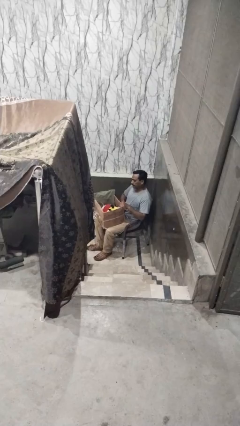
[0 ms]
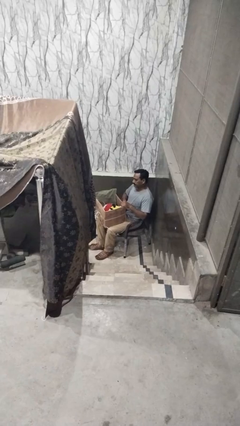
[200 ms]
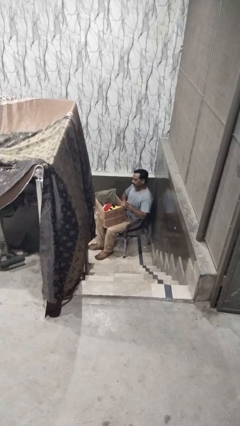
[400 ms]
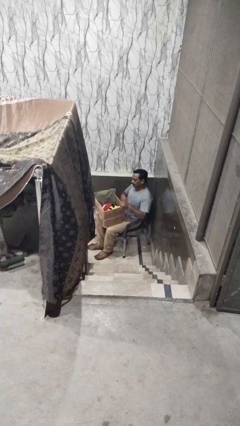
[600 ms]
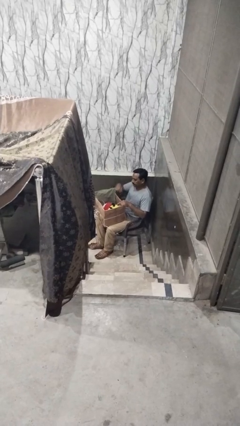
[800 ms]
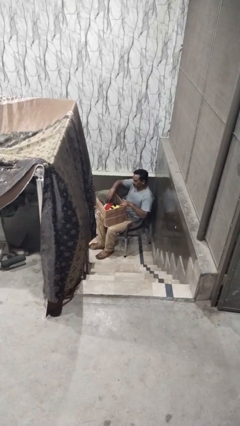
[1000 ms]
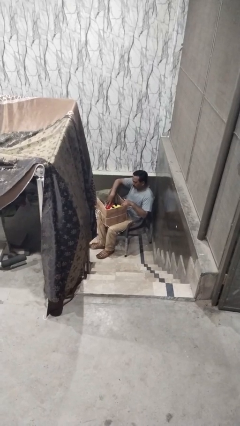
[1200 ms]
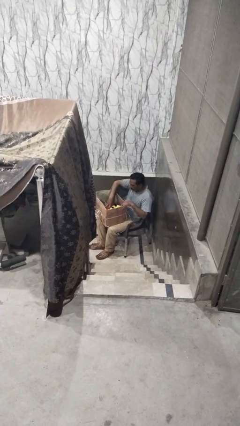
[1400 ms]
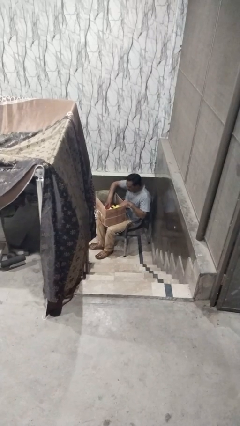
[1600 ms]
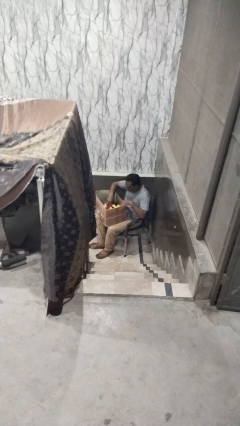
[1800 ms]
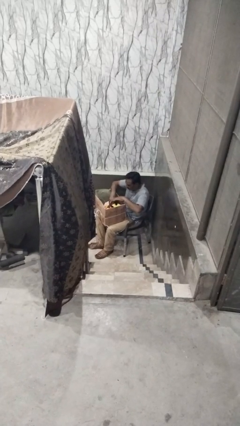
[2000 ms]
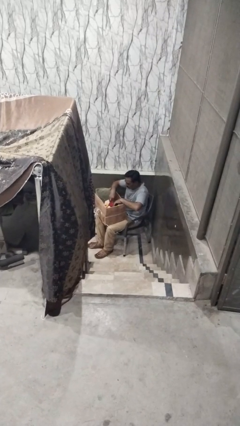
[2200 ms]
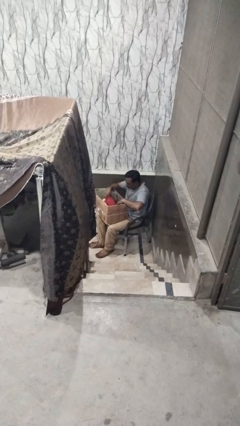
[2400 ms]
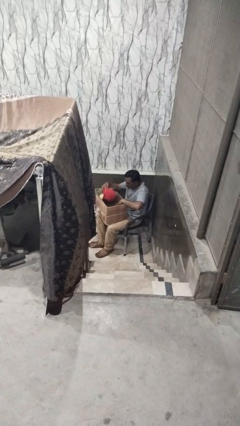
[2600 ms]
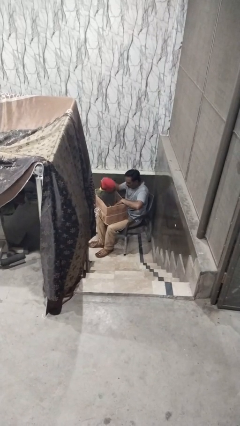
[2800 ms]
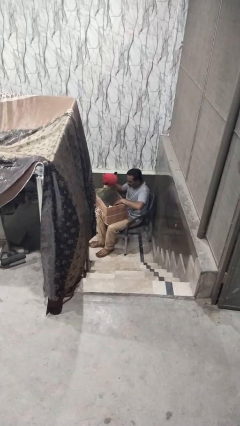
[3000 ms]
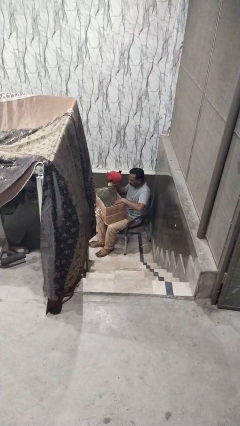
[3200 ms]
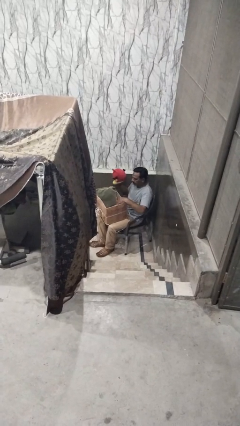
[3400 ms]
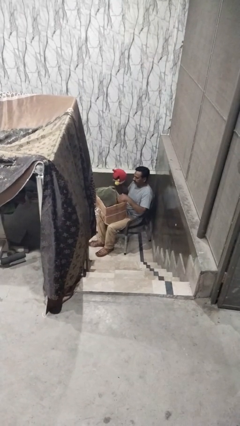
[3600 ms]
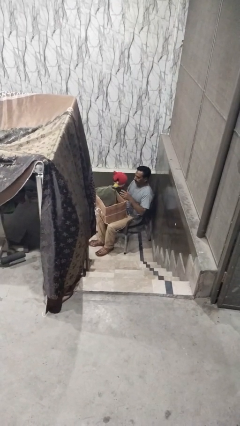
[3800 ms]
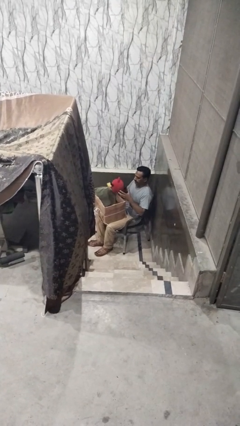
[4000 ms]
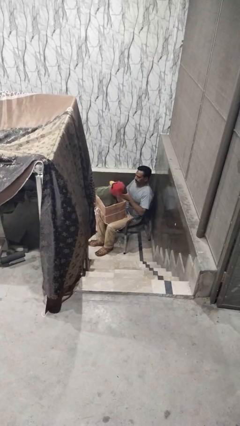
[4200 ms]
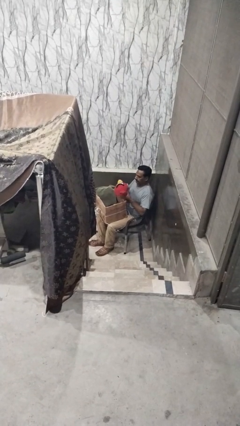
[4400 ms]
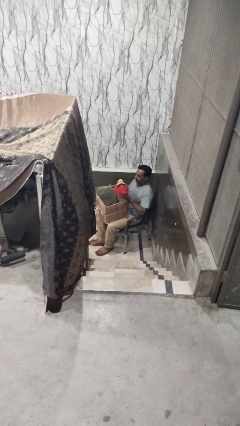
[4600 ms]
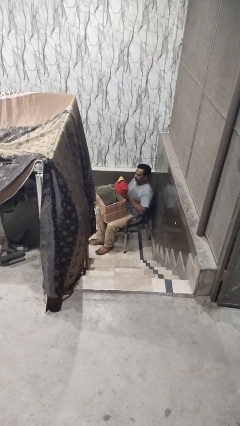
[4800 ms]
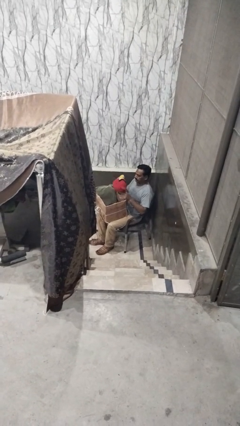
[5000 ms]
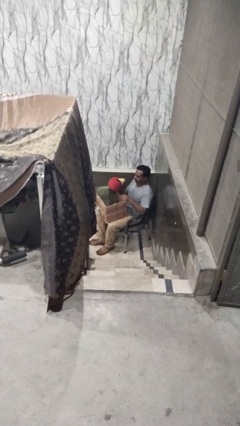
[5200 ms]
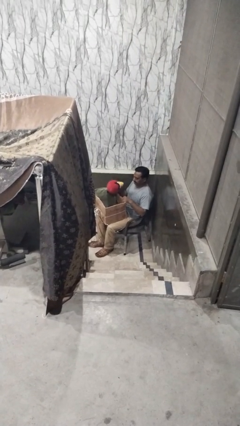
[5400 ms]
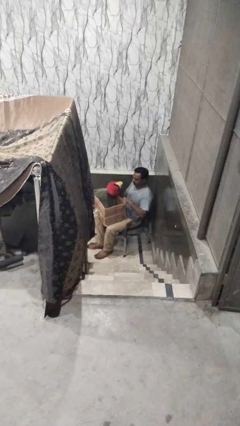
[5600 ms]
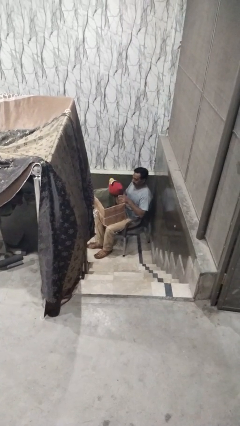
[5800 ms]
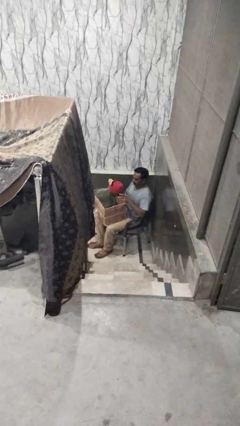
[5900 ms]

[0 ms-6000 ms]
person takes object from box

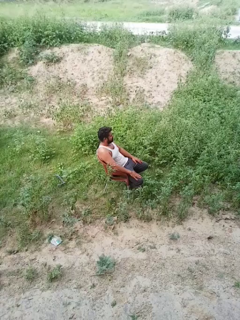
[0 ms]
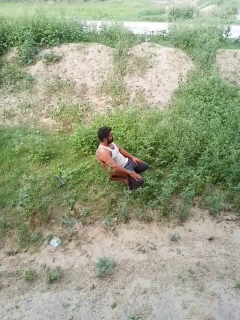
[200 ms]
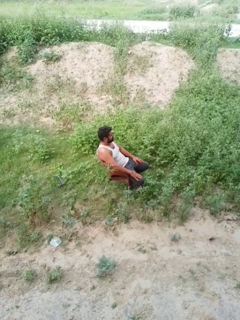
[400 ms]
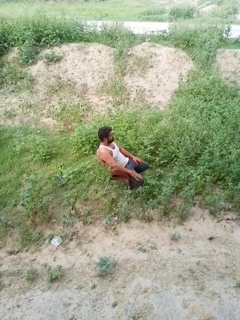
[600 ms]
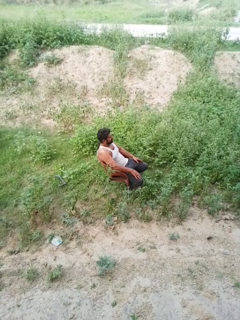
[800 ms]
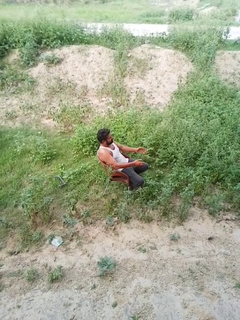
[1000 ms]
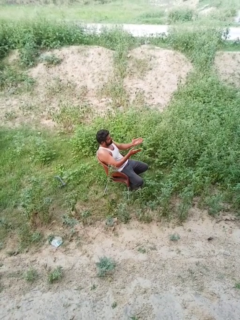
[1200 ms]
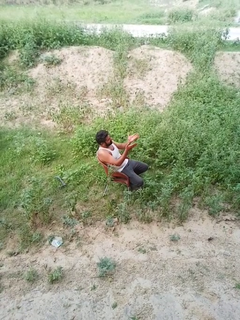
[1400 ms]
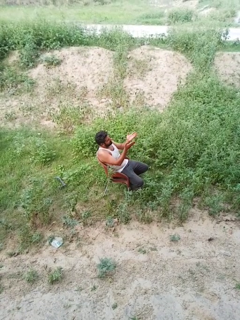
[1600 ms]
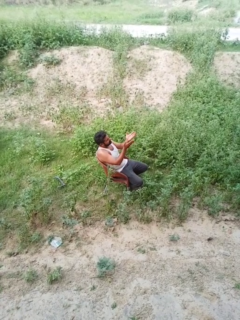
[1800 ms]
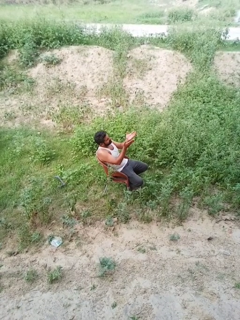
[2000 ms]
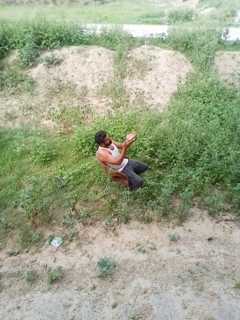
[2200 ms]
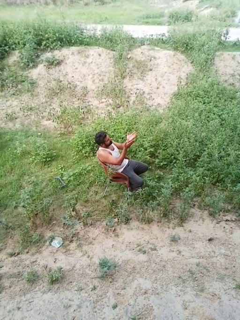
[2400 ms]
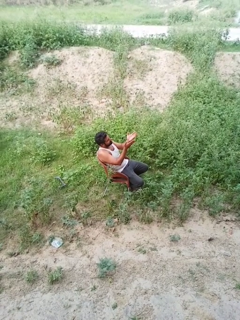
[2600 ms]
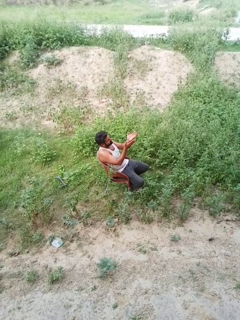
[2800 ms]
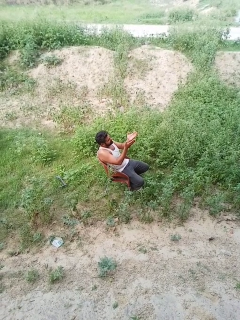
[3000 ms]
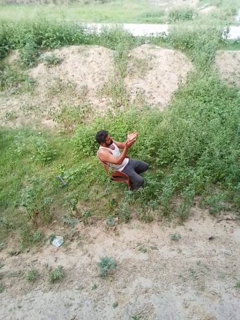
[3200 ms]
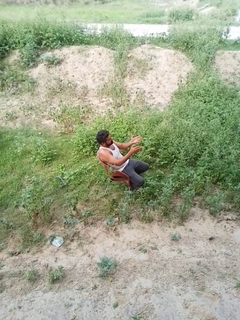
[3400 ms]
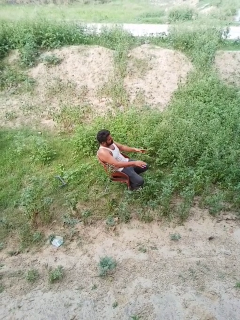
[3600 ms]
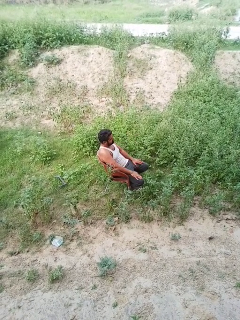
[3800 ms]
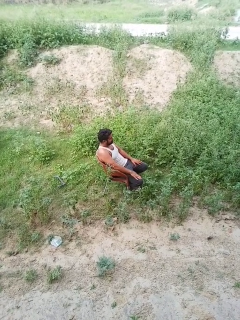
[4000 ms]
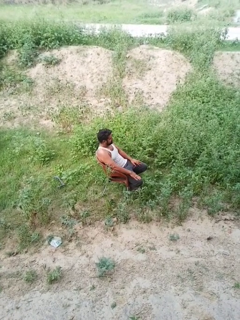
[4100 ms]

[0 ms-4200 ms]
person prays

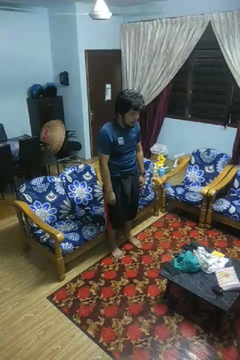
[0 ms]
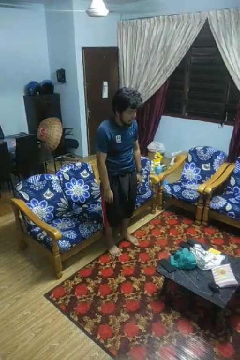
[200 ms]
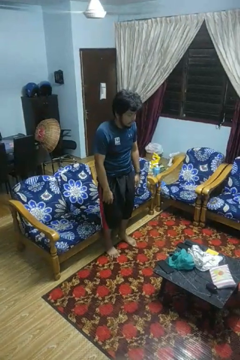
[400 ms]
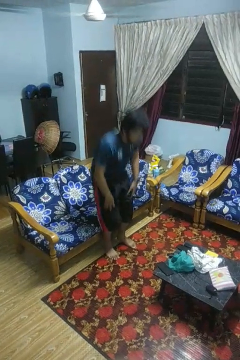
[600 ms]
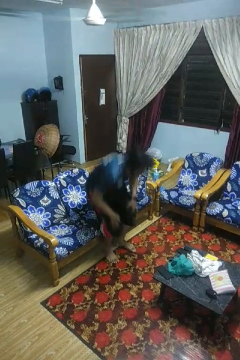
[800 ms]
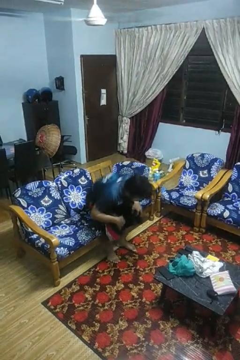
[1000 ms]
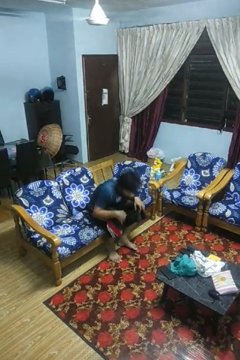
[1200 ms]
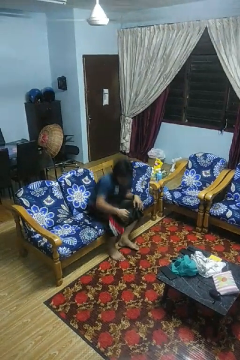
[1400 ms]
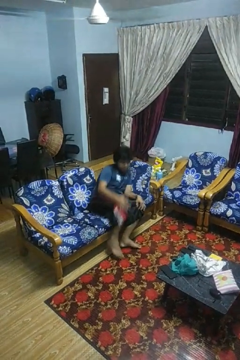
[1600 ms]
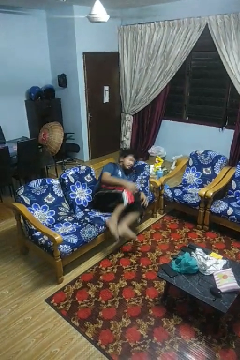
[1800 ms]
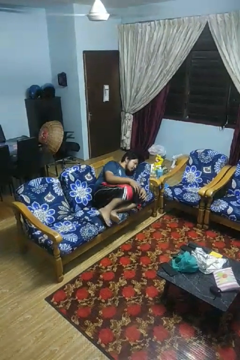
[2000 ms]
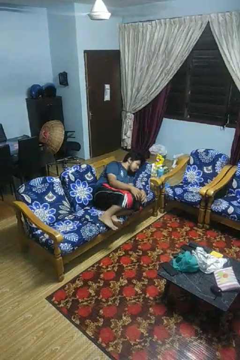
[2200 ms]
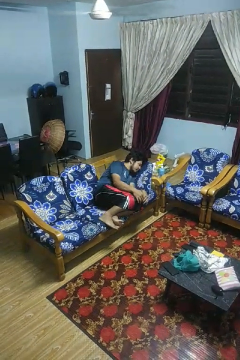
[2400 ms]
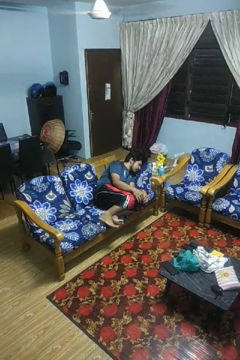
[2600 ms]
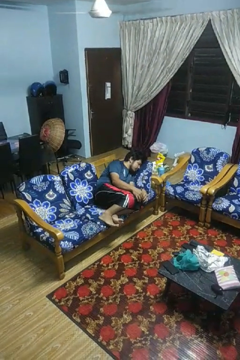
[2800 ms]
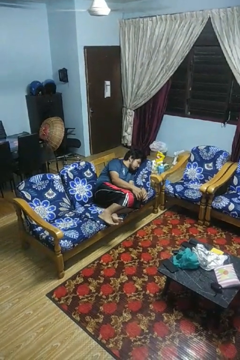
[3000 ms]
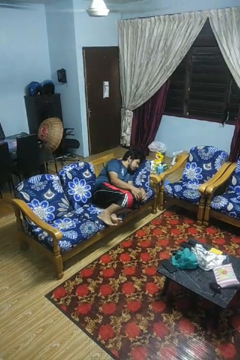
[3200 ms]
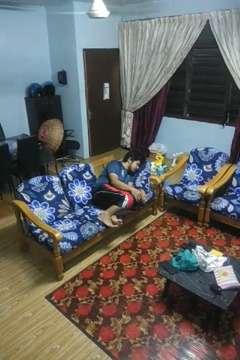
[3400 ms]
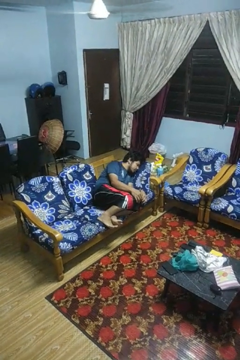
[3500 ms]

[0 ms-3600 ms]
person lies down on couch

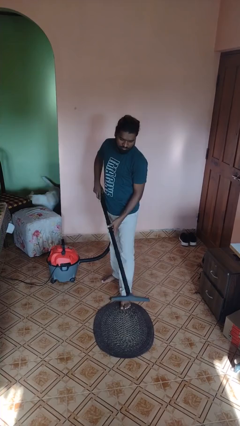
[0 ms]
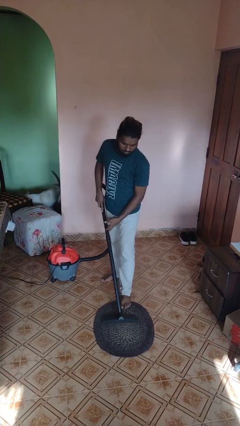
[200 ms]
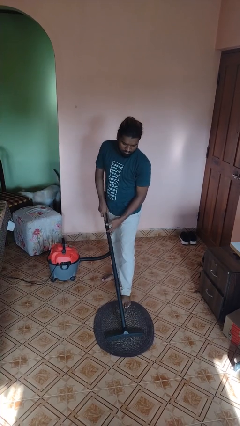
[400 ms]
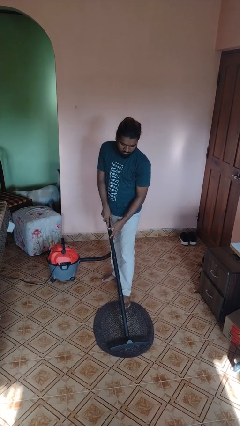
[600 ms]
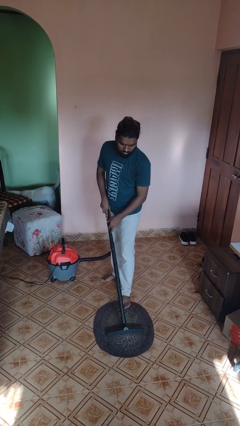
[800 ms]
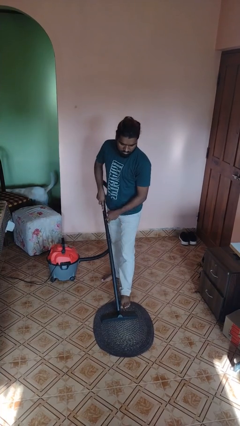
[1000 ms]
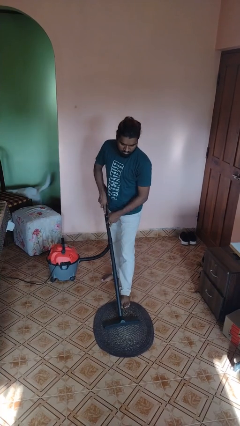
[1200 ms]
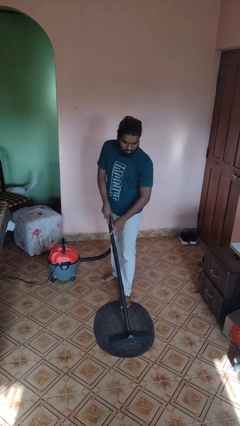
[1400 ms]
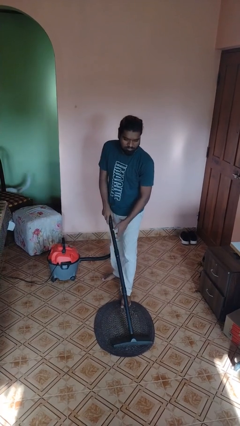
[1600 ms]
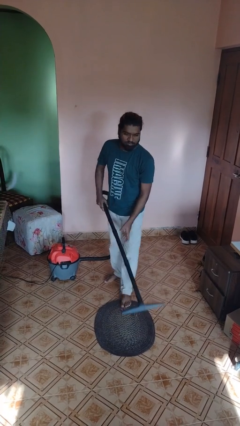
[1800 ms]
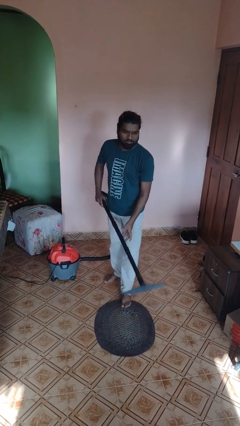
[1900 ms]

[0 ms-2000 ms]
person vacuums carpet

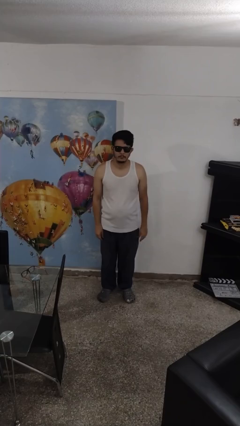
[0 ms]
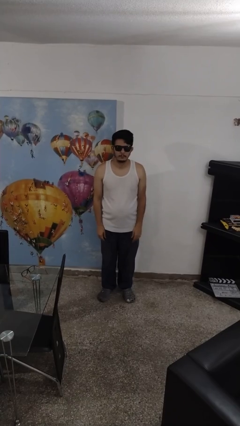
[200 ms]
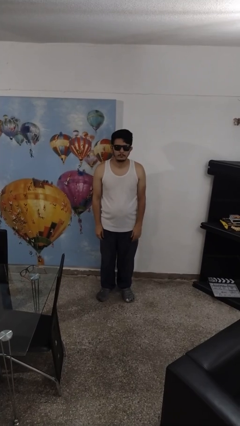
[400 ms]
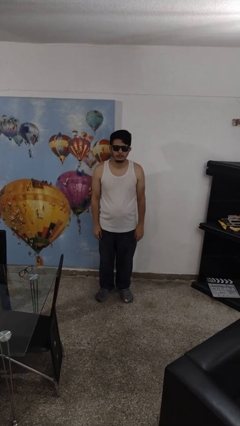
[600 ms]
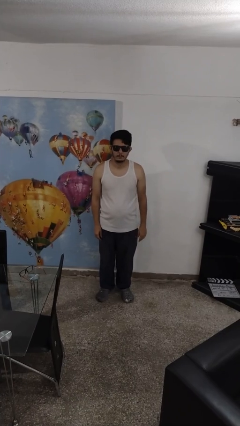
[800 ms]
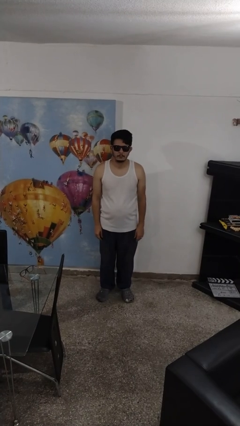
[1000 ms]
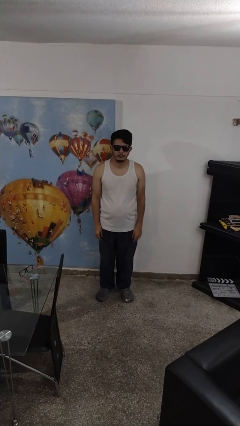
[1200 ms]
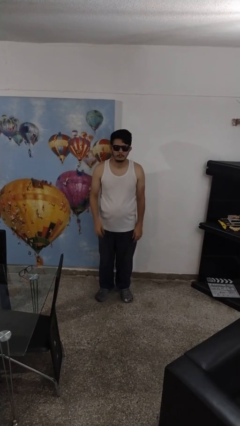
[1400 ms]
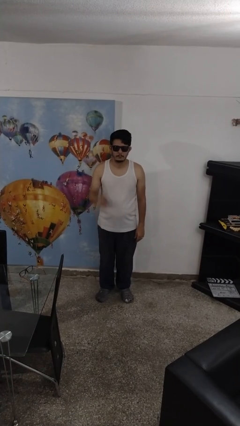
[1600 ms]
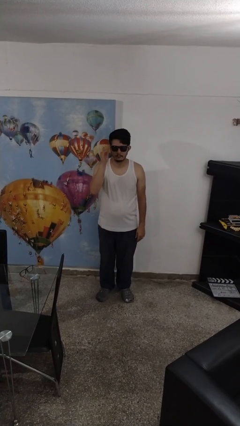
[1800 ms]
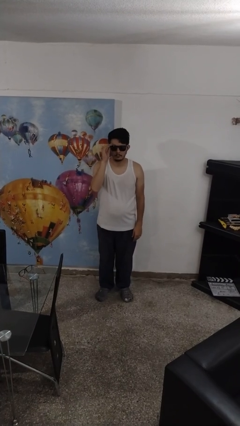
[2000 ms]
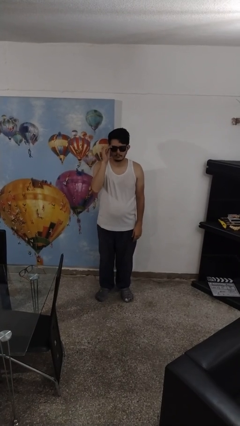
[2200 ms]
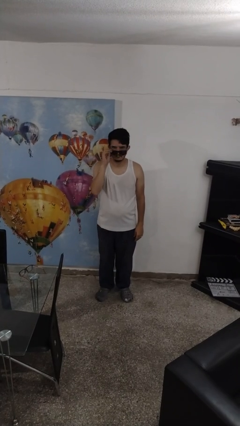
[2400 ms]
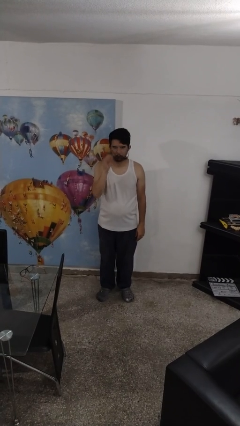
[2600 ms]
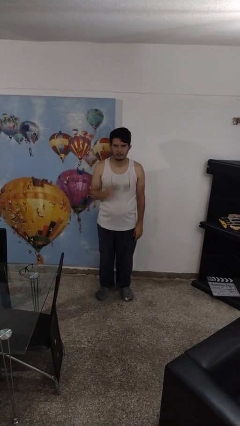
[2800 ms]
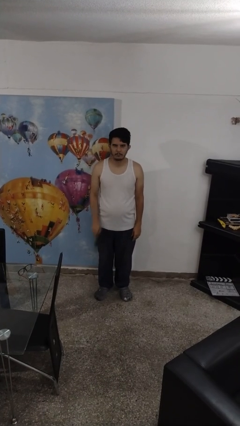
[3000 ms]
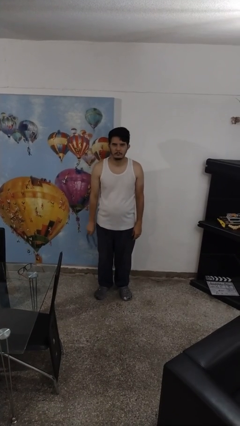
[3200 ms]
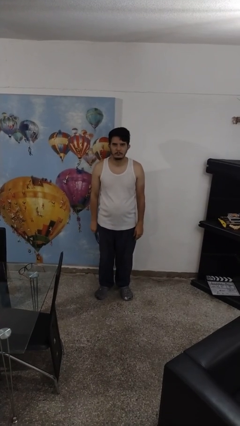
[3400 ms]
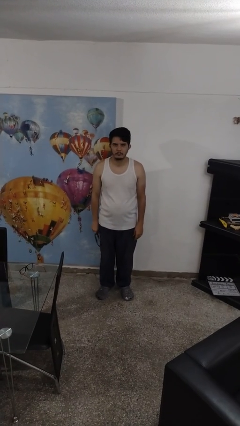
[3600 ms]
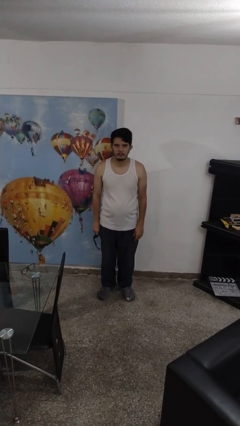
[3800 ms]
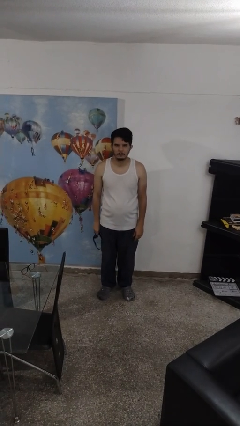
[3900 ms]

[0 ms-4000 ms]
person takes off sunglasses
